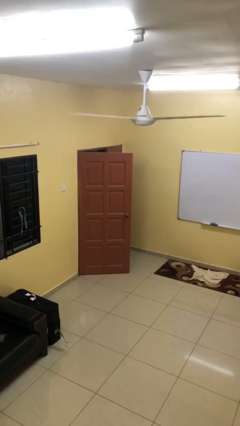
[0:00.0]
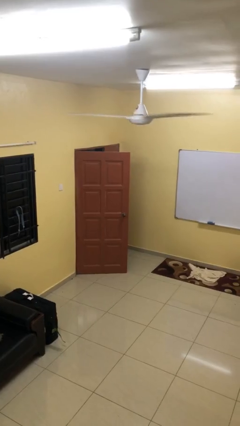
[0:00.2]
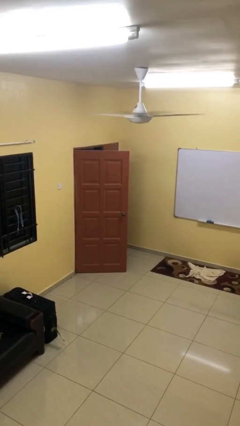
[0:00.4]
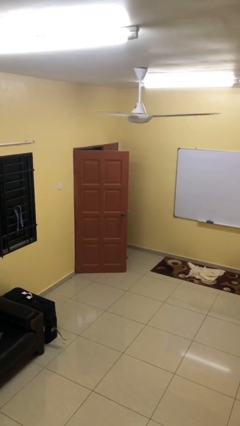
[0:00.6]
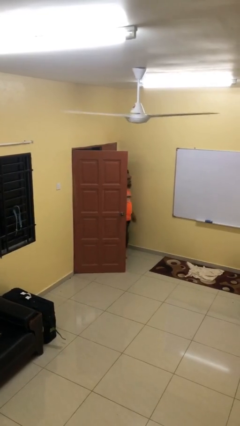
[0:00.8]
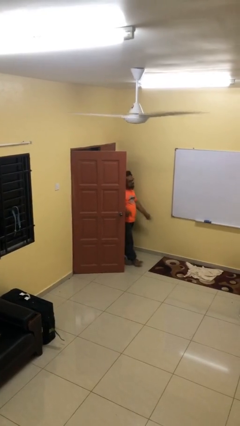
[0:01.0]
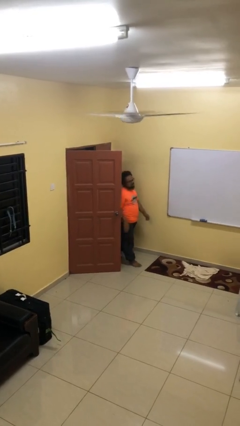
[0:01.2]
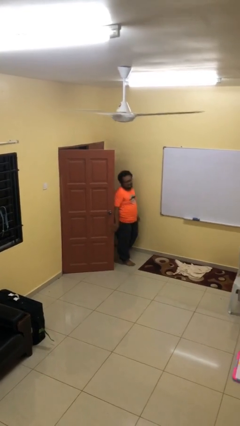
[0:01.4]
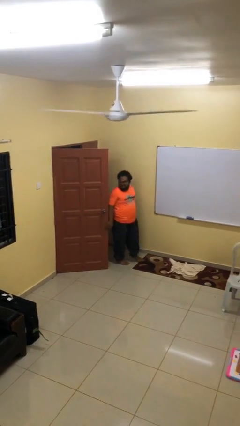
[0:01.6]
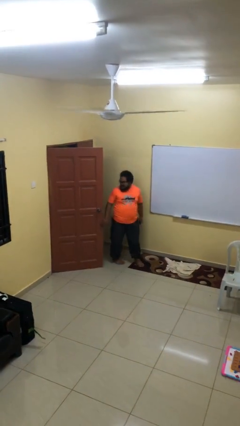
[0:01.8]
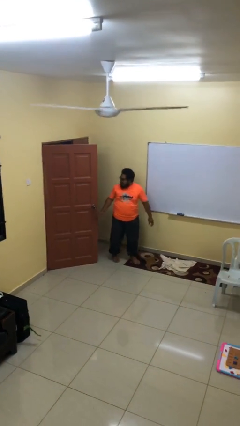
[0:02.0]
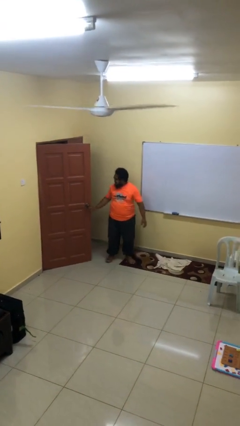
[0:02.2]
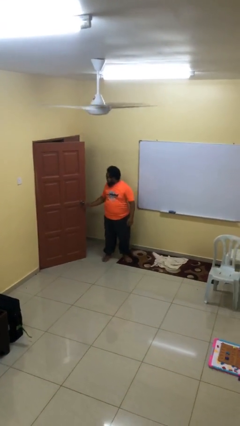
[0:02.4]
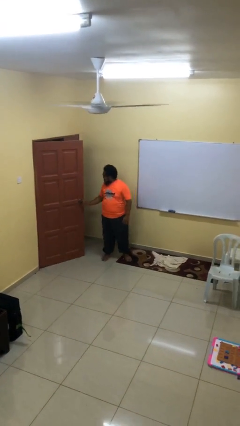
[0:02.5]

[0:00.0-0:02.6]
person enters scene through structure

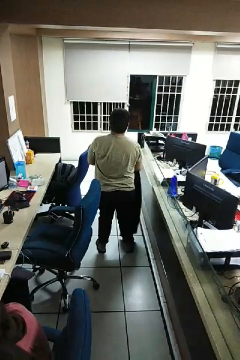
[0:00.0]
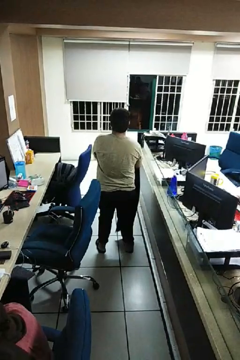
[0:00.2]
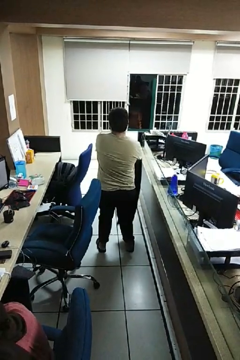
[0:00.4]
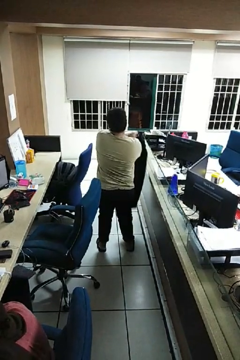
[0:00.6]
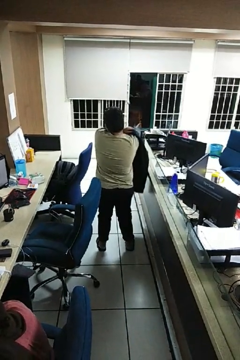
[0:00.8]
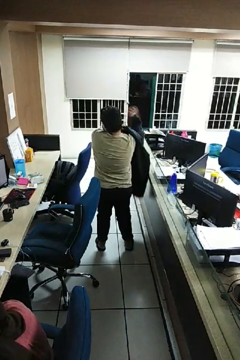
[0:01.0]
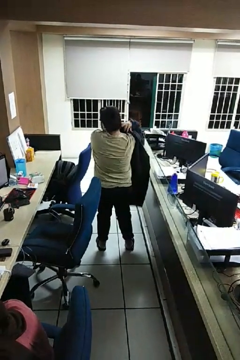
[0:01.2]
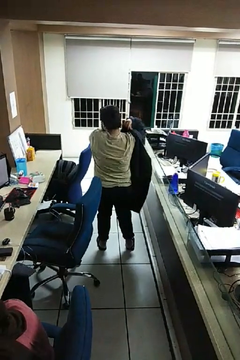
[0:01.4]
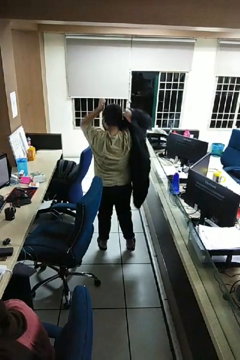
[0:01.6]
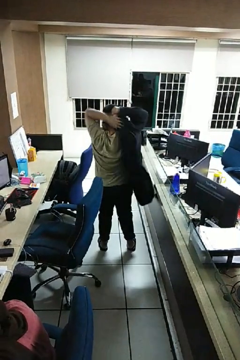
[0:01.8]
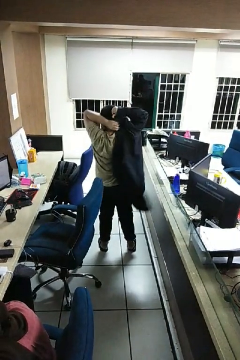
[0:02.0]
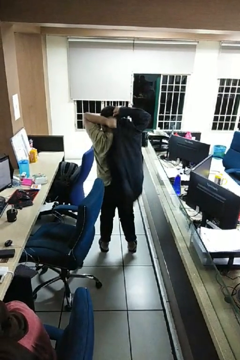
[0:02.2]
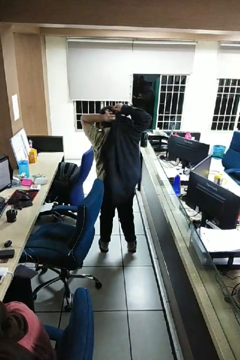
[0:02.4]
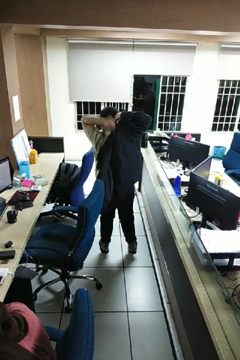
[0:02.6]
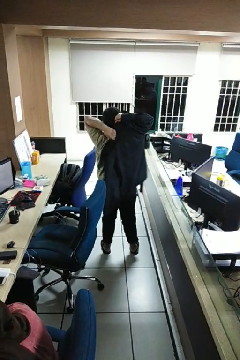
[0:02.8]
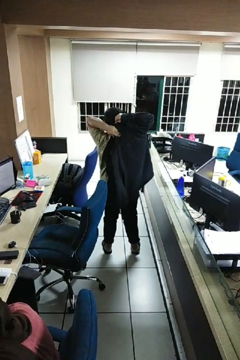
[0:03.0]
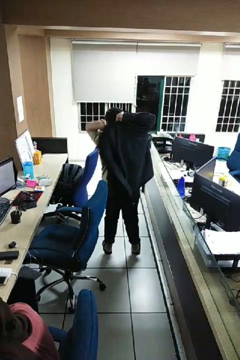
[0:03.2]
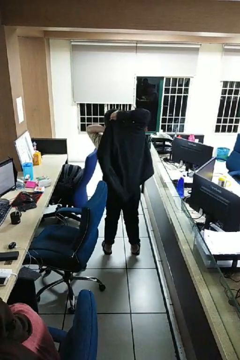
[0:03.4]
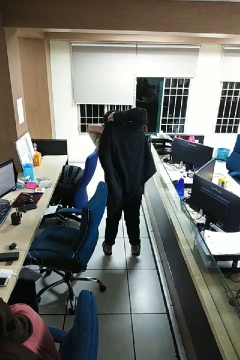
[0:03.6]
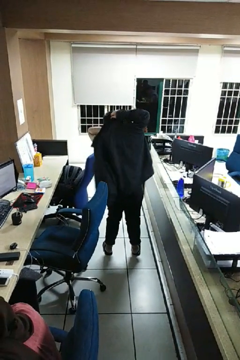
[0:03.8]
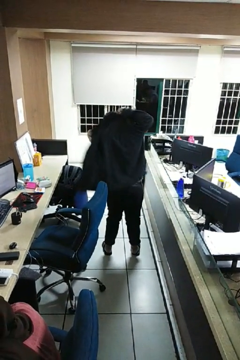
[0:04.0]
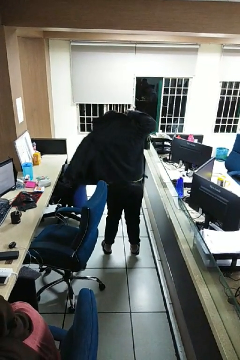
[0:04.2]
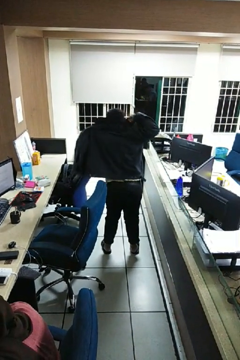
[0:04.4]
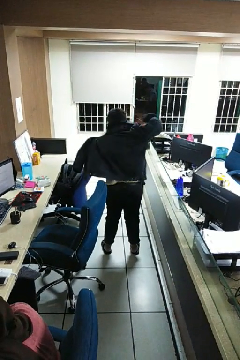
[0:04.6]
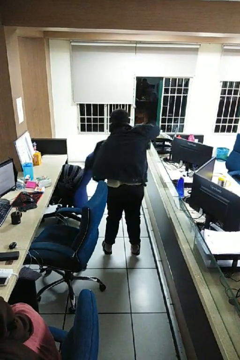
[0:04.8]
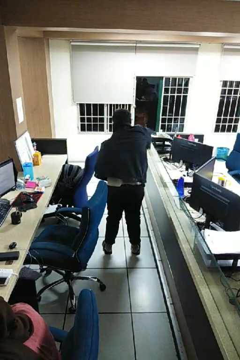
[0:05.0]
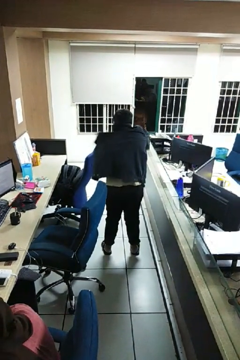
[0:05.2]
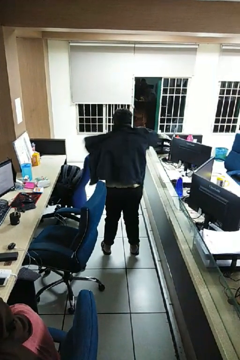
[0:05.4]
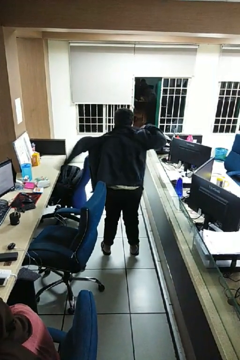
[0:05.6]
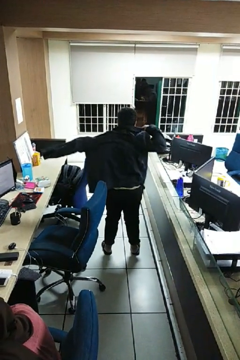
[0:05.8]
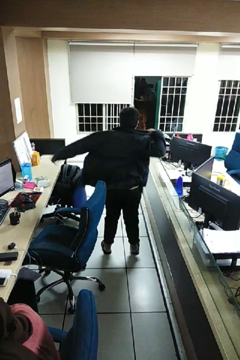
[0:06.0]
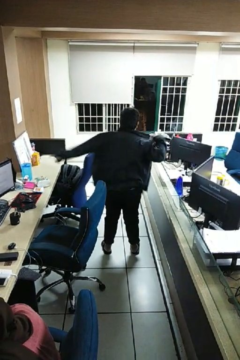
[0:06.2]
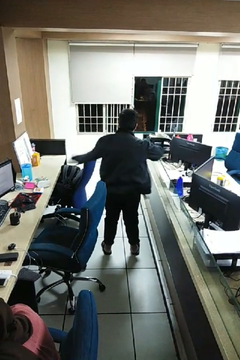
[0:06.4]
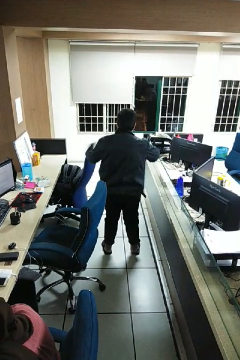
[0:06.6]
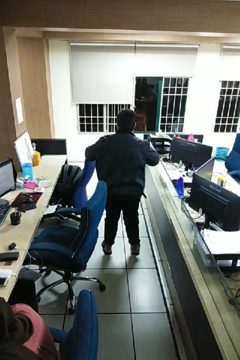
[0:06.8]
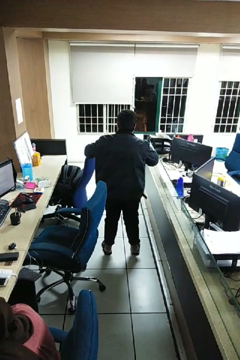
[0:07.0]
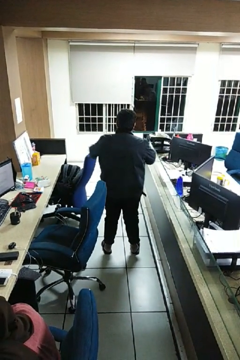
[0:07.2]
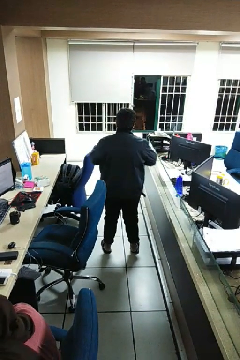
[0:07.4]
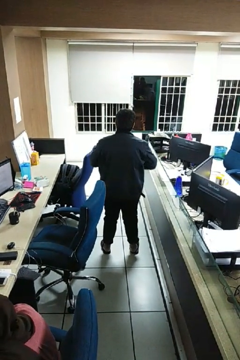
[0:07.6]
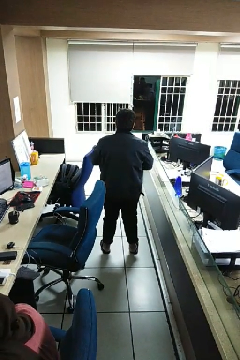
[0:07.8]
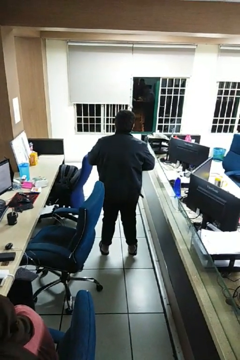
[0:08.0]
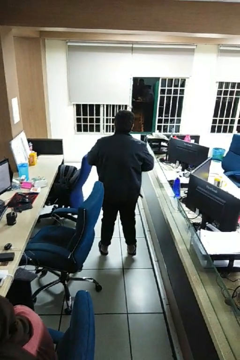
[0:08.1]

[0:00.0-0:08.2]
person puts on shirt

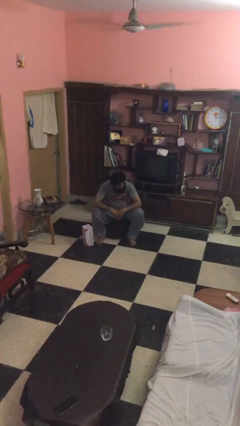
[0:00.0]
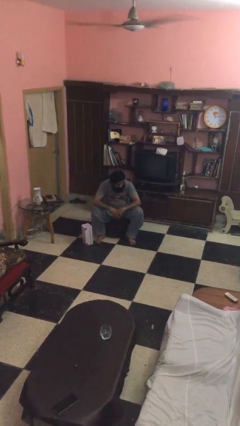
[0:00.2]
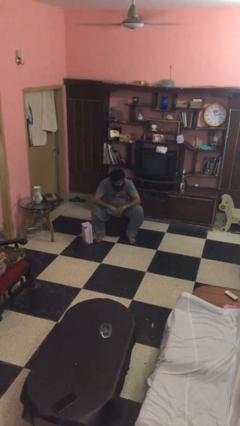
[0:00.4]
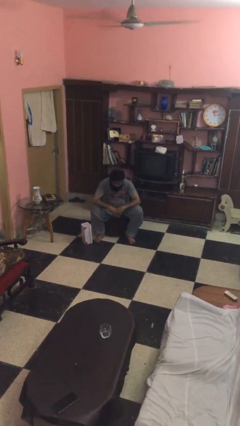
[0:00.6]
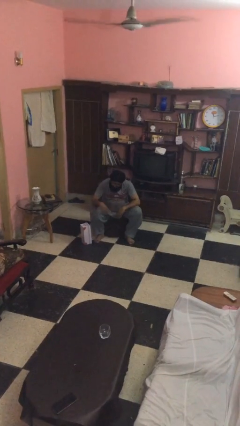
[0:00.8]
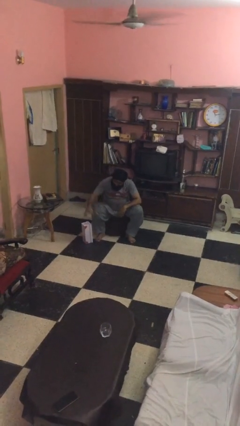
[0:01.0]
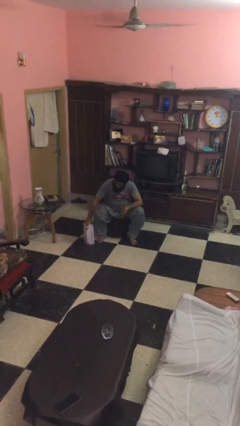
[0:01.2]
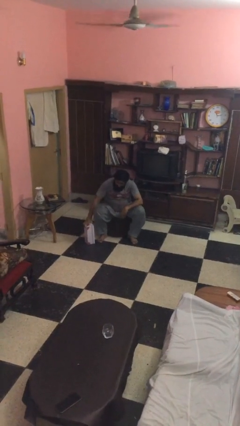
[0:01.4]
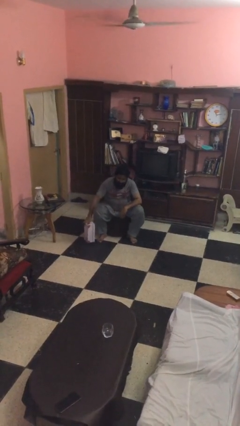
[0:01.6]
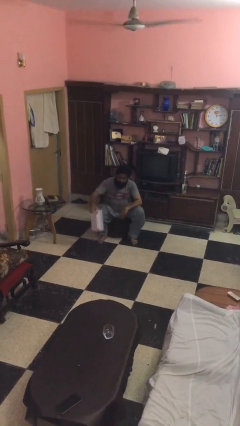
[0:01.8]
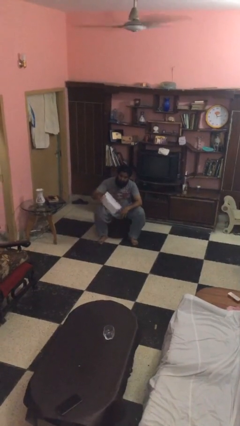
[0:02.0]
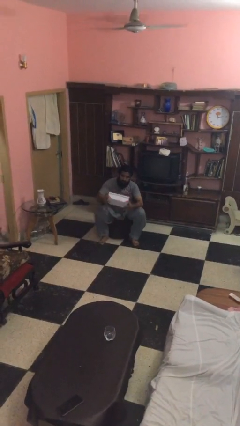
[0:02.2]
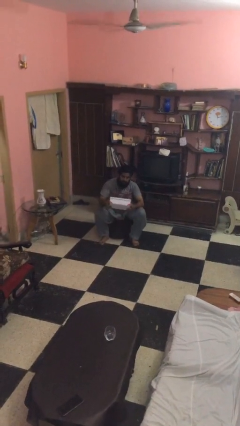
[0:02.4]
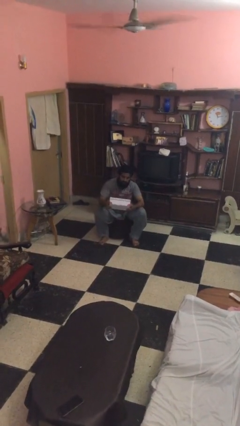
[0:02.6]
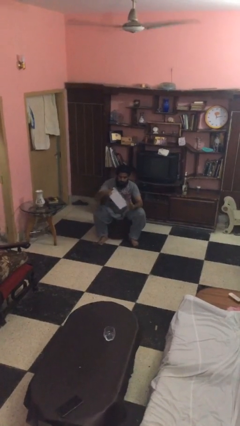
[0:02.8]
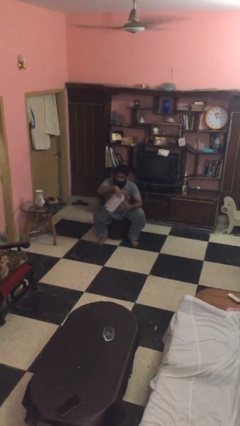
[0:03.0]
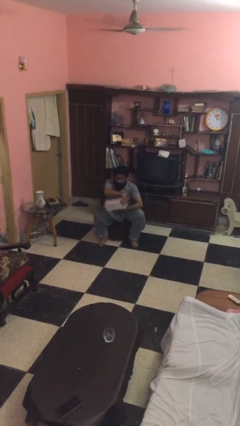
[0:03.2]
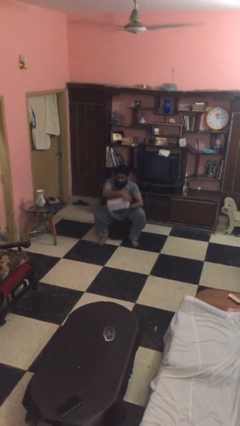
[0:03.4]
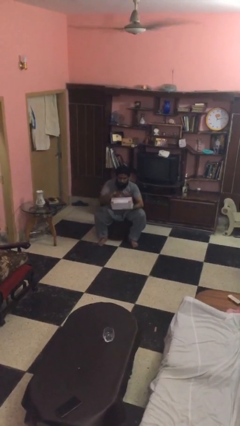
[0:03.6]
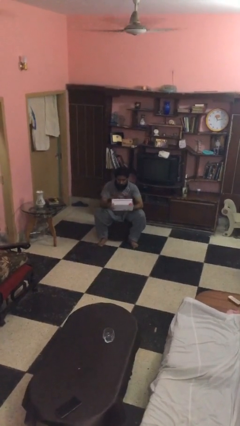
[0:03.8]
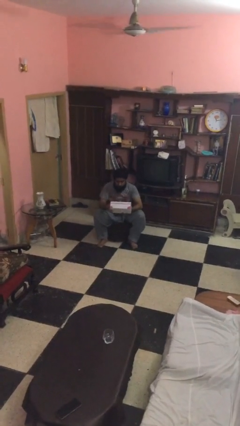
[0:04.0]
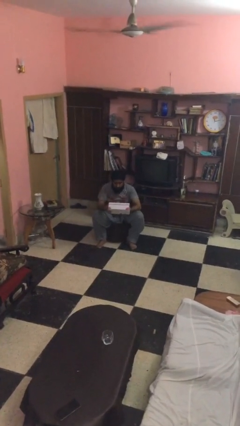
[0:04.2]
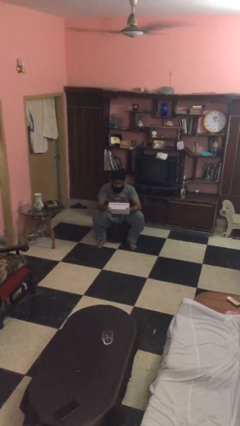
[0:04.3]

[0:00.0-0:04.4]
person picks up object from floor

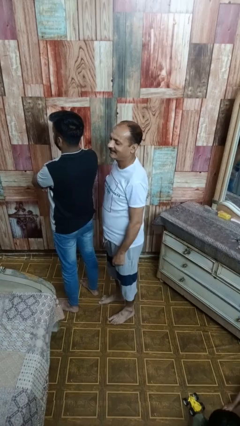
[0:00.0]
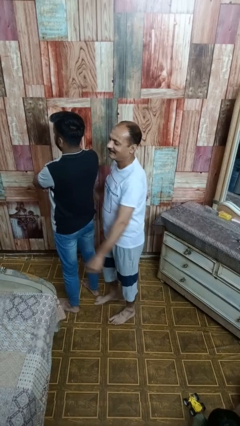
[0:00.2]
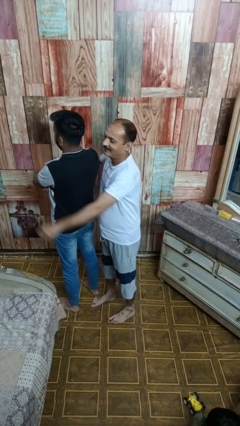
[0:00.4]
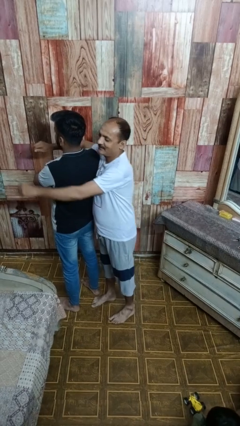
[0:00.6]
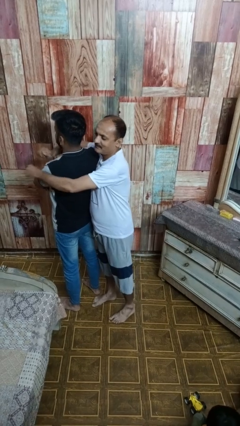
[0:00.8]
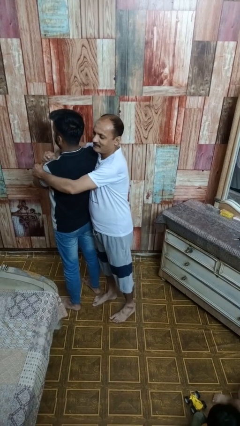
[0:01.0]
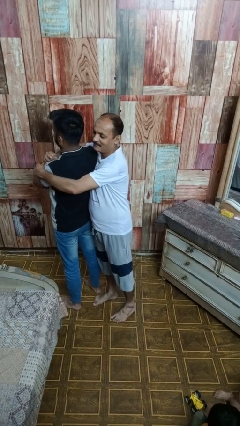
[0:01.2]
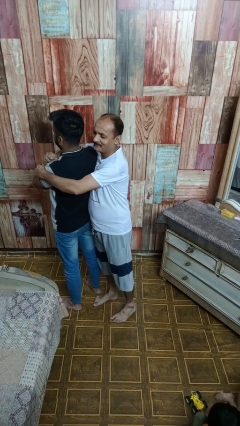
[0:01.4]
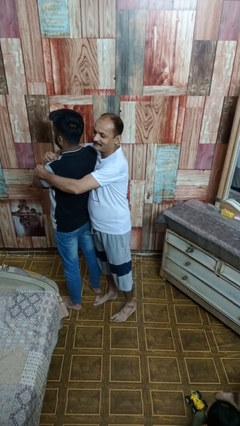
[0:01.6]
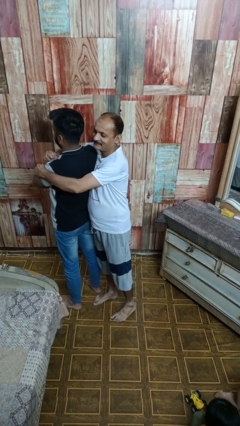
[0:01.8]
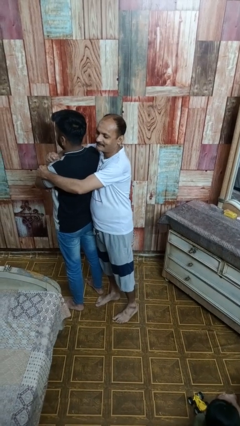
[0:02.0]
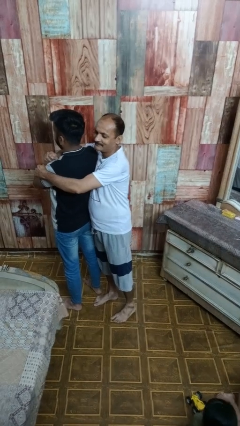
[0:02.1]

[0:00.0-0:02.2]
person hugs person from behind

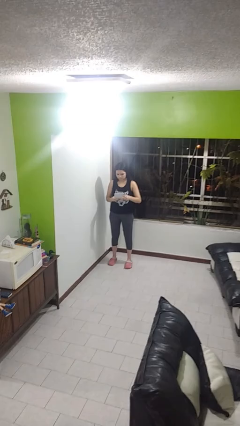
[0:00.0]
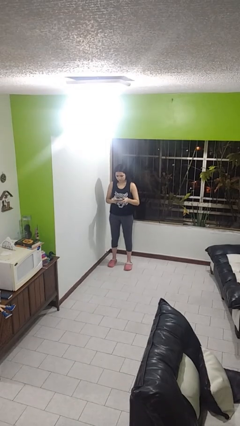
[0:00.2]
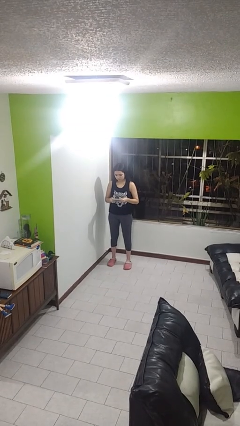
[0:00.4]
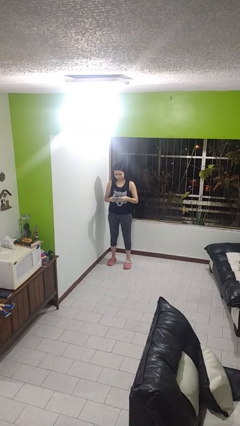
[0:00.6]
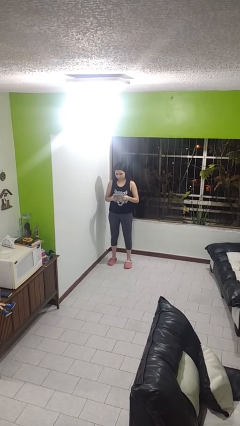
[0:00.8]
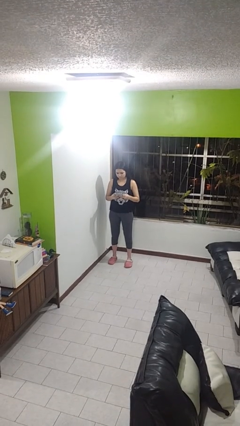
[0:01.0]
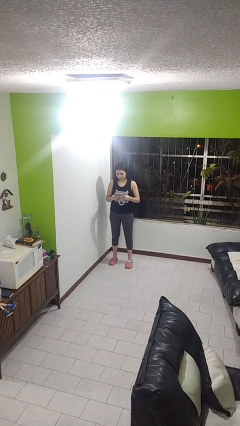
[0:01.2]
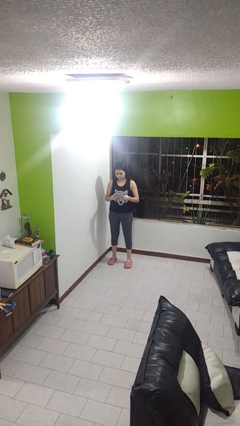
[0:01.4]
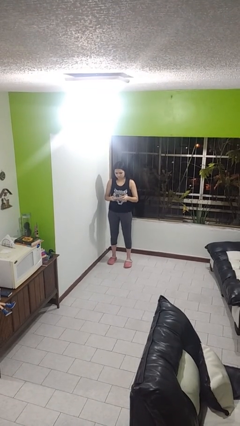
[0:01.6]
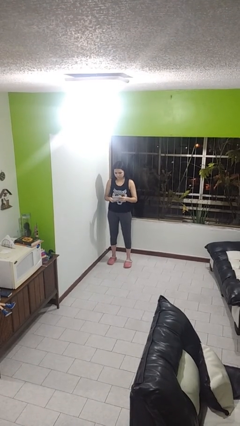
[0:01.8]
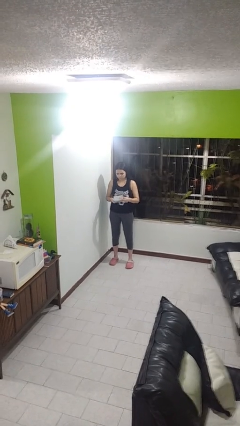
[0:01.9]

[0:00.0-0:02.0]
person interacts with handheld game
